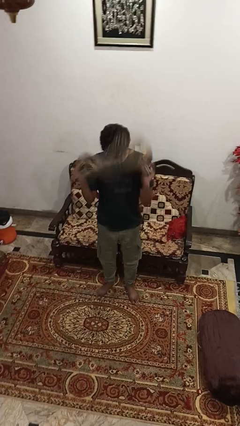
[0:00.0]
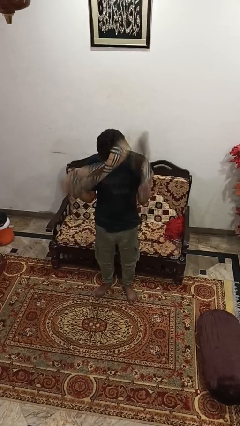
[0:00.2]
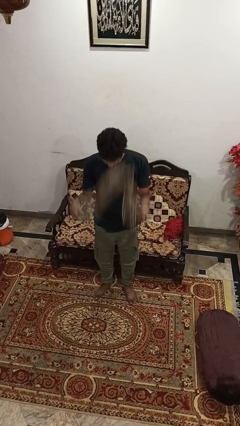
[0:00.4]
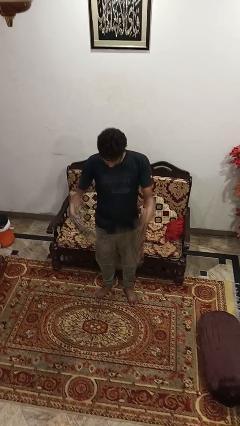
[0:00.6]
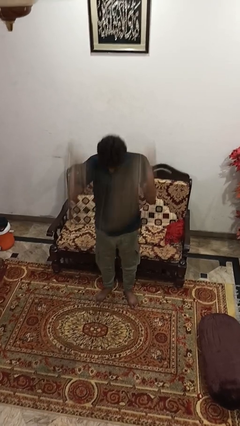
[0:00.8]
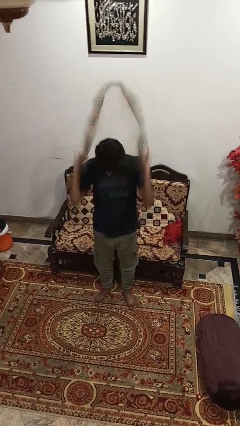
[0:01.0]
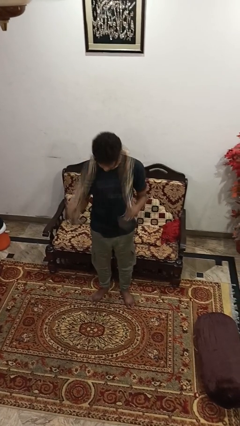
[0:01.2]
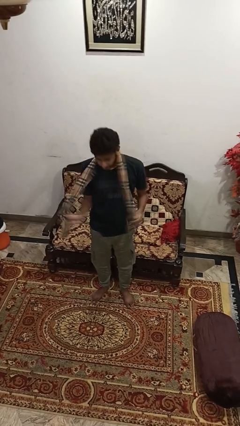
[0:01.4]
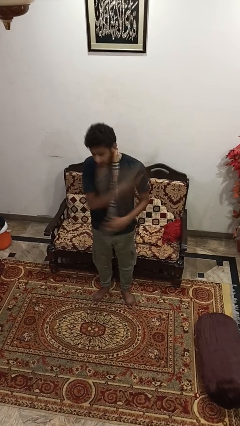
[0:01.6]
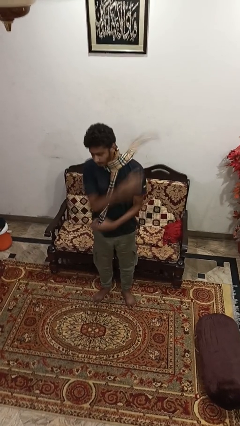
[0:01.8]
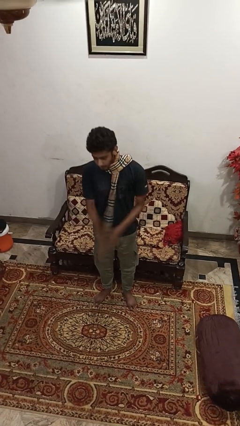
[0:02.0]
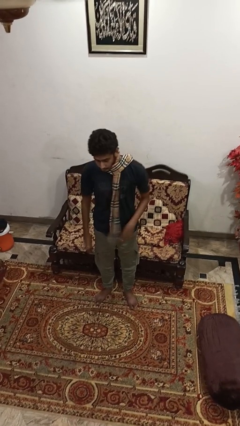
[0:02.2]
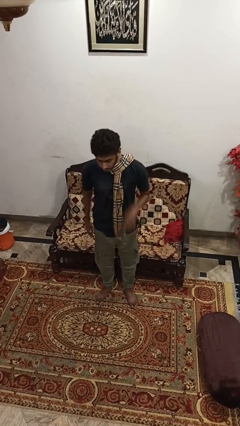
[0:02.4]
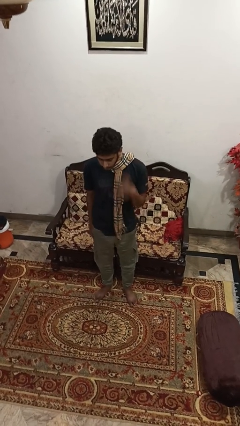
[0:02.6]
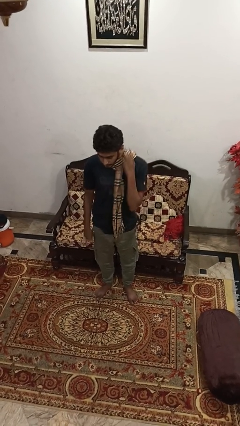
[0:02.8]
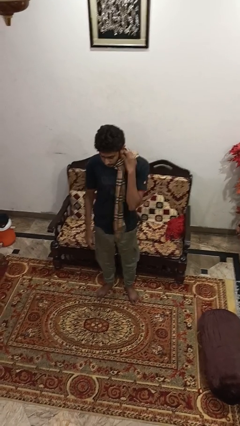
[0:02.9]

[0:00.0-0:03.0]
person puts on scarf

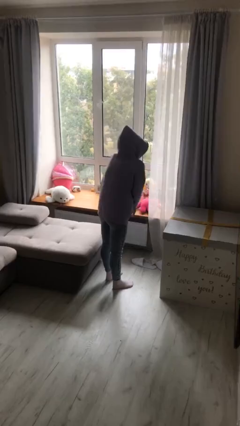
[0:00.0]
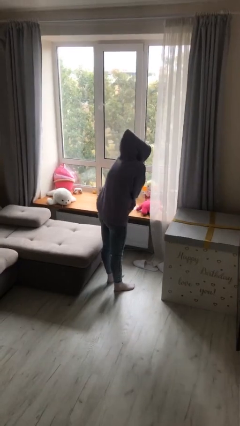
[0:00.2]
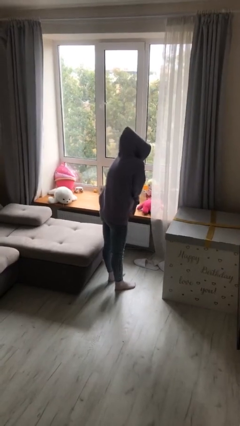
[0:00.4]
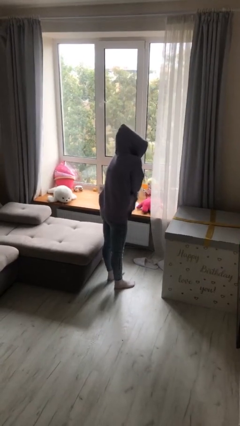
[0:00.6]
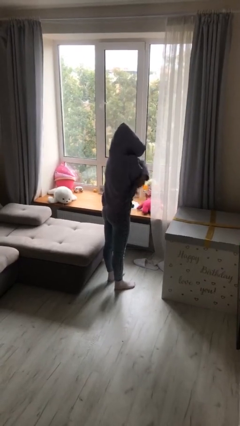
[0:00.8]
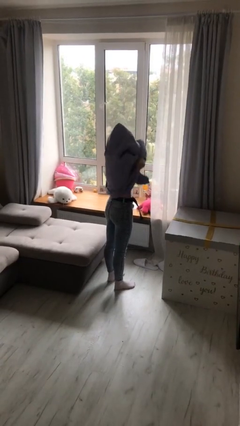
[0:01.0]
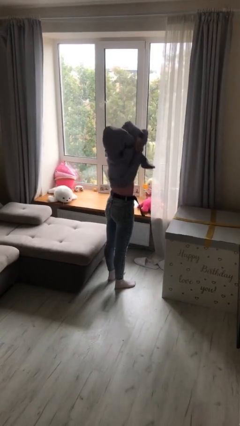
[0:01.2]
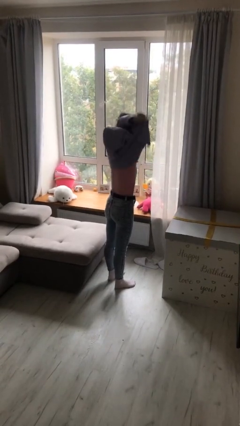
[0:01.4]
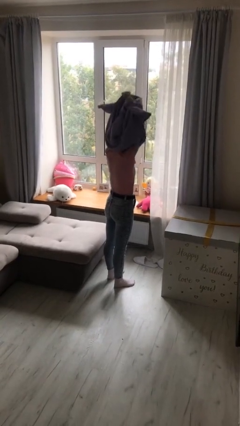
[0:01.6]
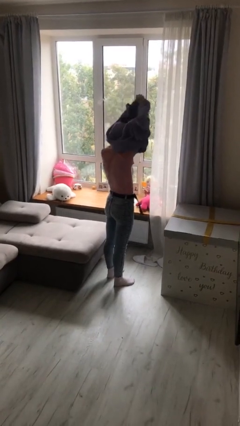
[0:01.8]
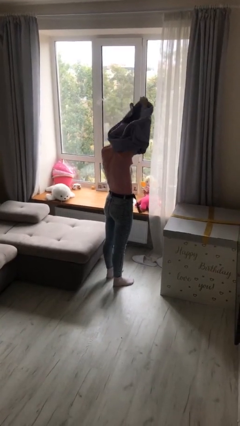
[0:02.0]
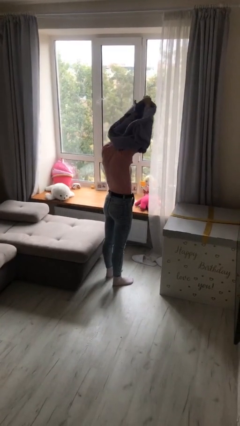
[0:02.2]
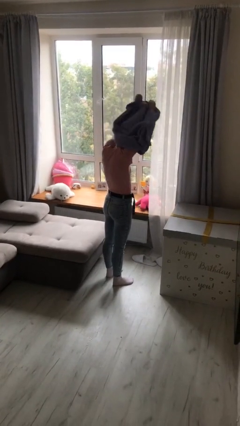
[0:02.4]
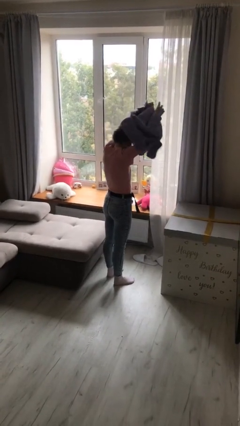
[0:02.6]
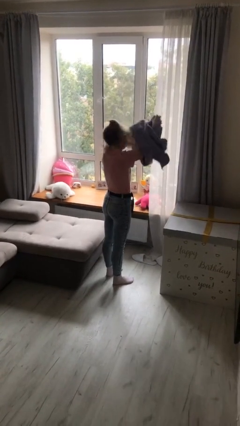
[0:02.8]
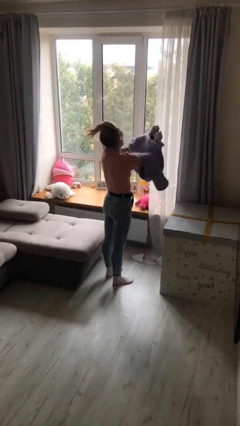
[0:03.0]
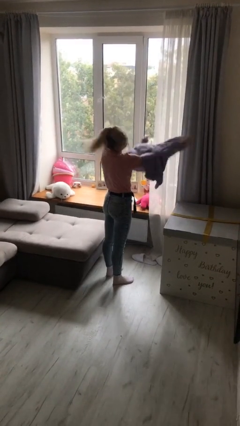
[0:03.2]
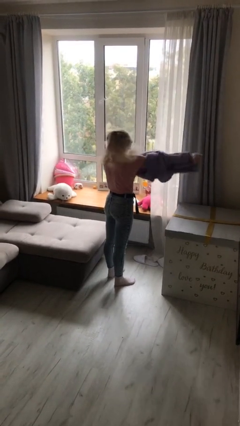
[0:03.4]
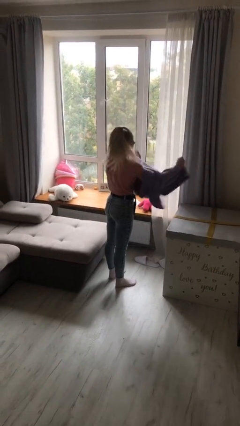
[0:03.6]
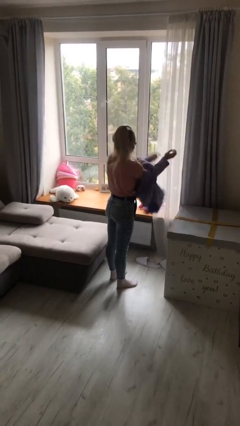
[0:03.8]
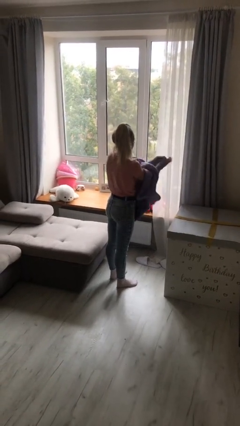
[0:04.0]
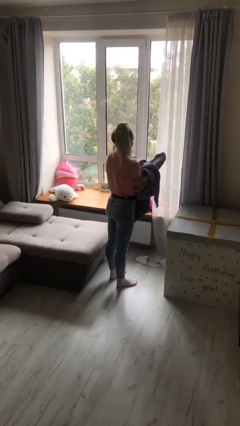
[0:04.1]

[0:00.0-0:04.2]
person takes off hoodie

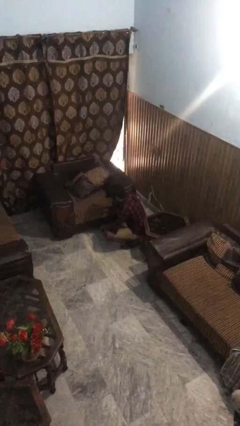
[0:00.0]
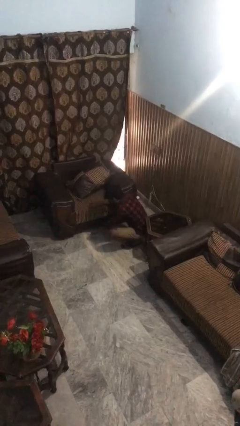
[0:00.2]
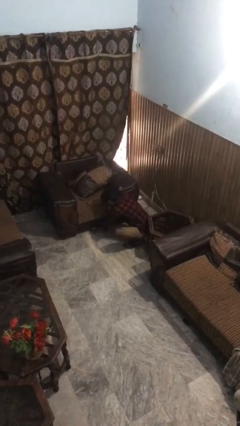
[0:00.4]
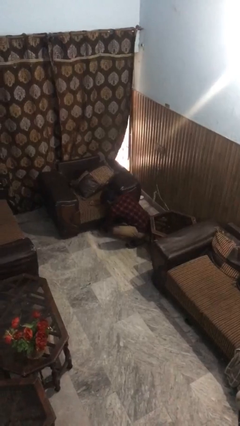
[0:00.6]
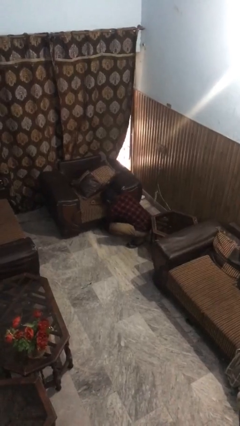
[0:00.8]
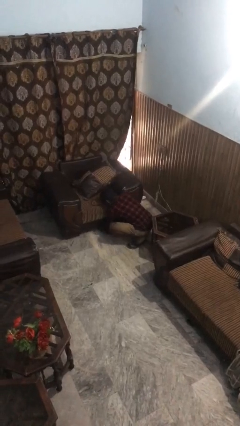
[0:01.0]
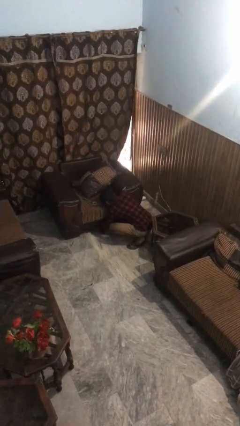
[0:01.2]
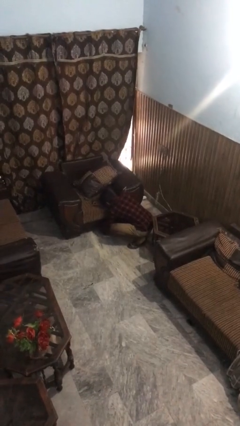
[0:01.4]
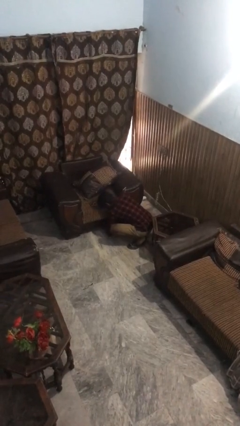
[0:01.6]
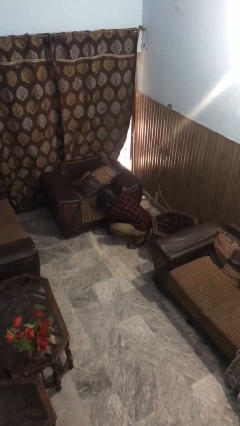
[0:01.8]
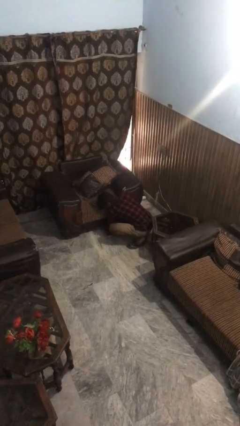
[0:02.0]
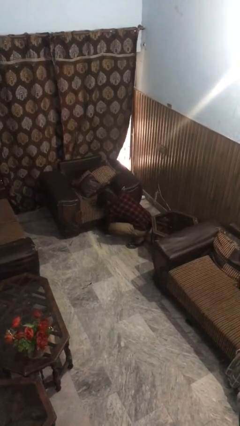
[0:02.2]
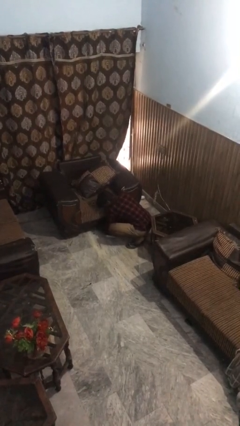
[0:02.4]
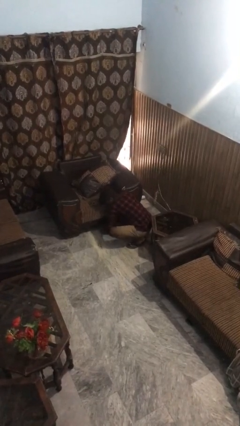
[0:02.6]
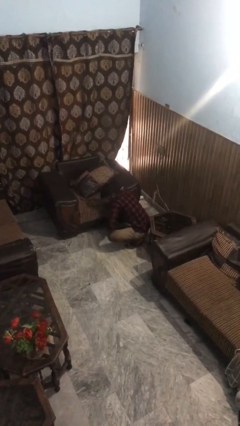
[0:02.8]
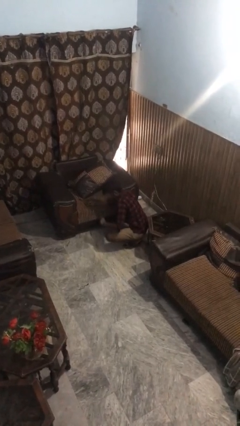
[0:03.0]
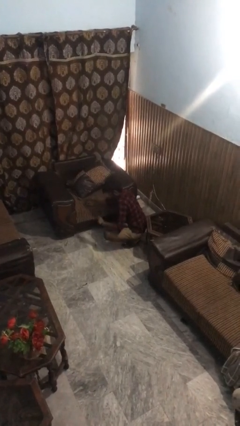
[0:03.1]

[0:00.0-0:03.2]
person searches under couch

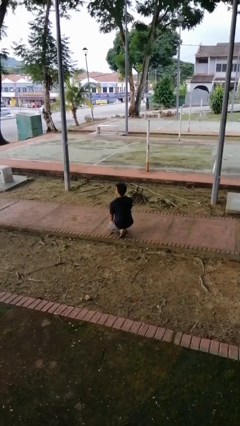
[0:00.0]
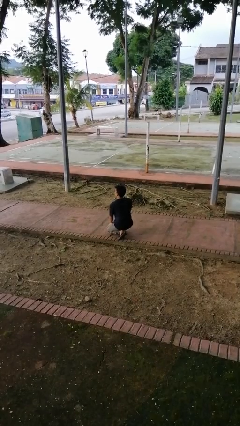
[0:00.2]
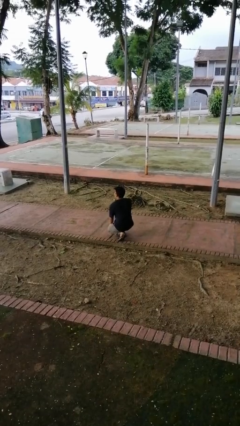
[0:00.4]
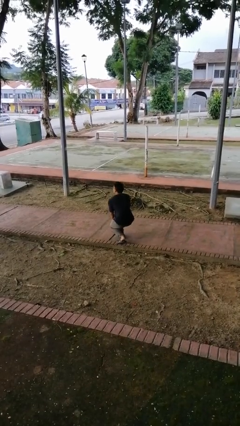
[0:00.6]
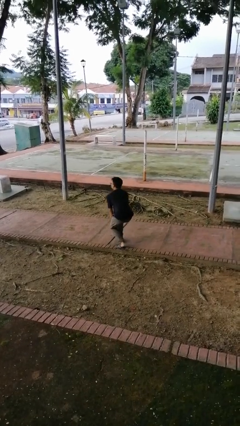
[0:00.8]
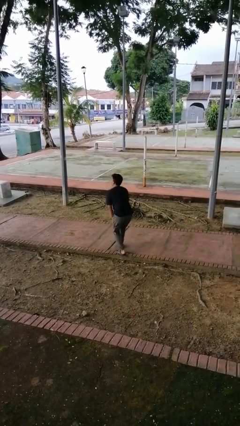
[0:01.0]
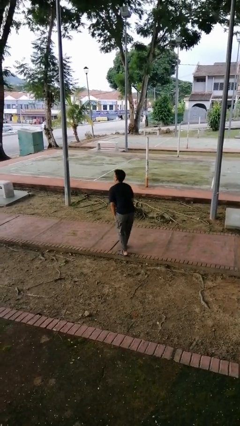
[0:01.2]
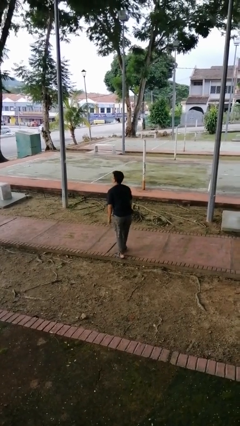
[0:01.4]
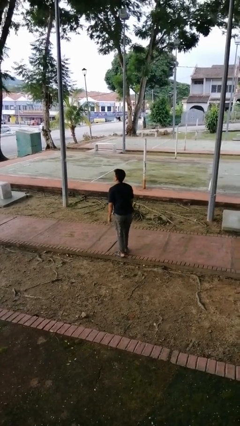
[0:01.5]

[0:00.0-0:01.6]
person stands up from floor

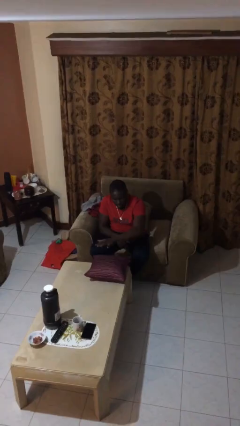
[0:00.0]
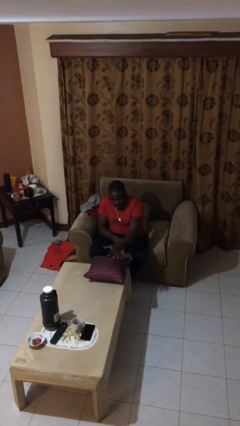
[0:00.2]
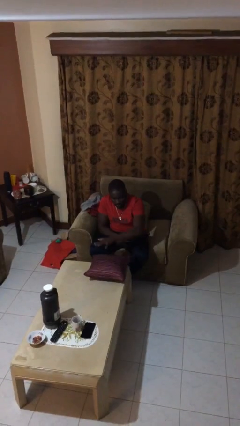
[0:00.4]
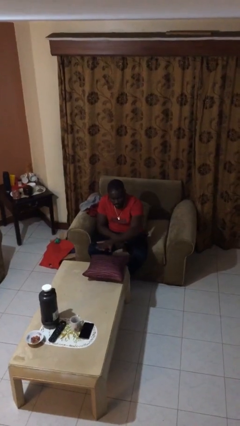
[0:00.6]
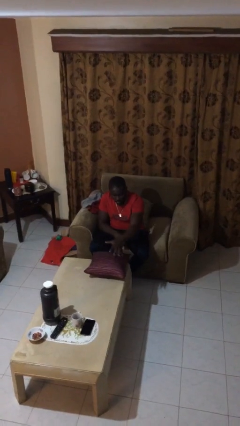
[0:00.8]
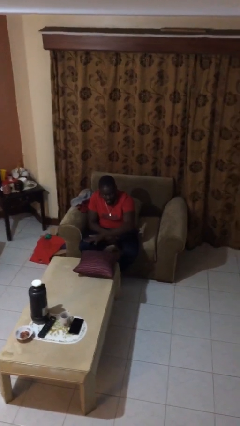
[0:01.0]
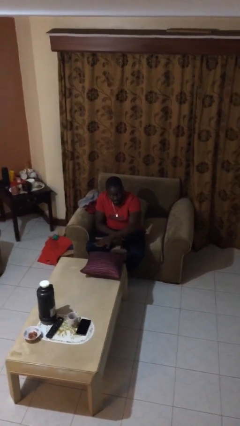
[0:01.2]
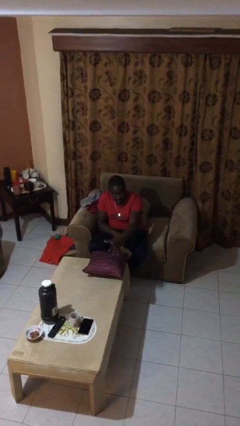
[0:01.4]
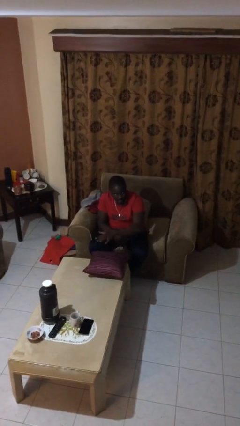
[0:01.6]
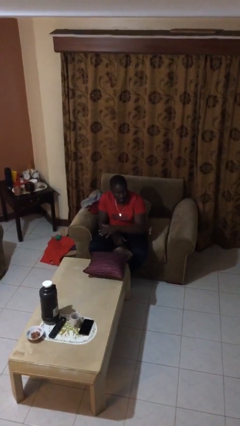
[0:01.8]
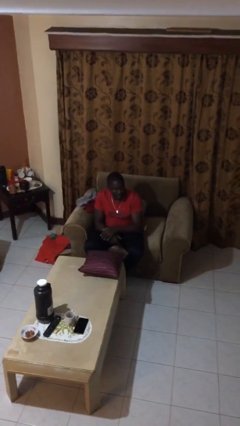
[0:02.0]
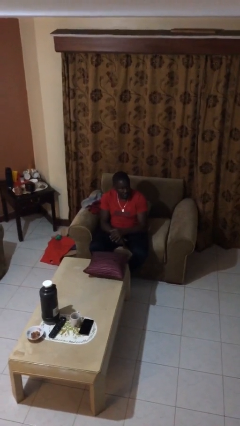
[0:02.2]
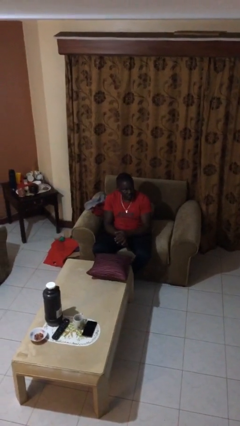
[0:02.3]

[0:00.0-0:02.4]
person waves hand over object

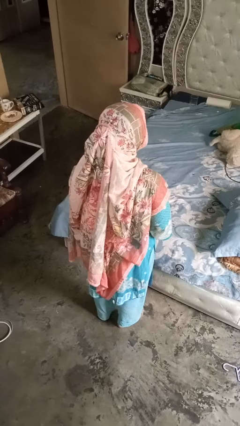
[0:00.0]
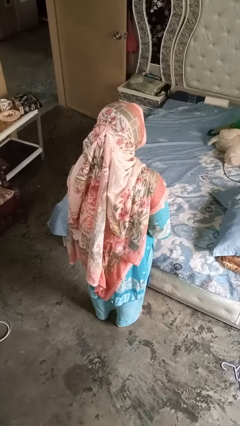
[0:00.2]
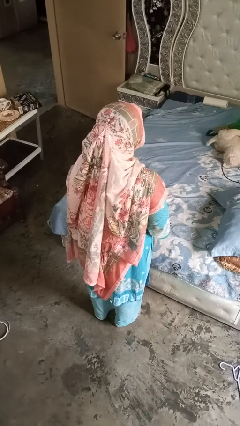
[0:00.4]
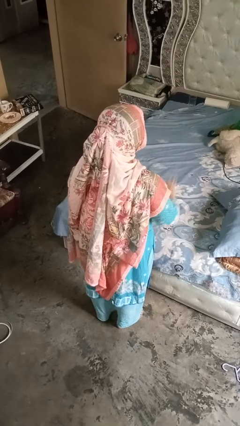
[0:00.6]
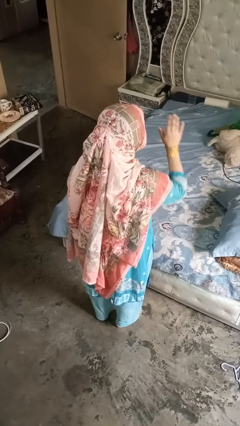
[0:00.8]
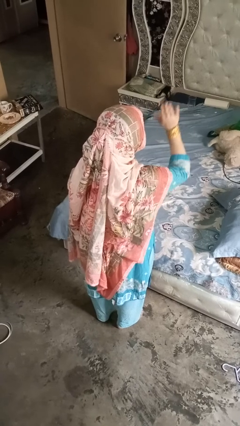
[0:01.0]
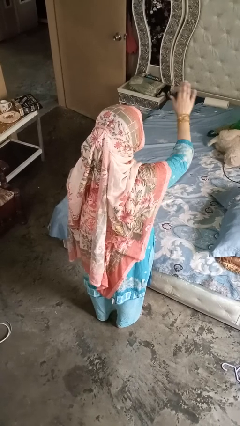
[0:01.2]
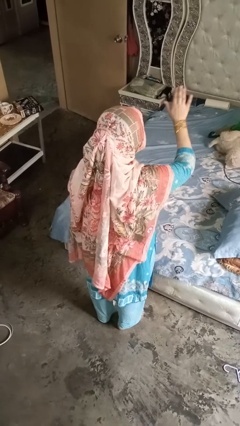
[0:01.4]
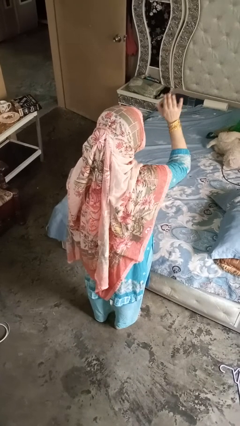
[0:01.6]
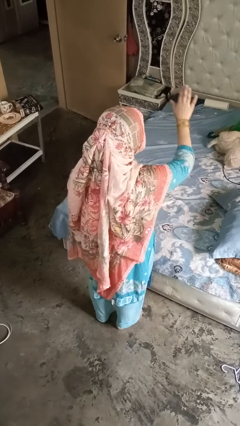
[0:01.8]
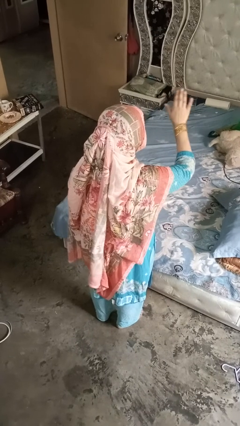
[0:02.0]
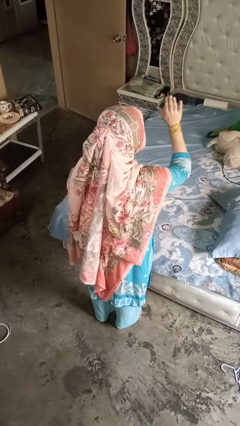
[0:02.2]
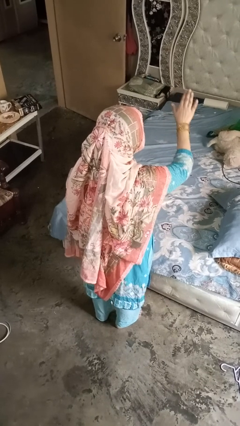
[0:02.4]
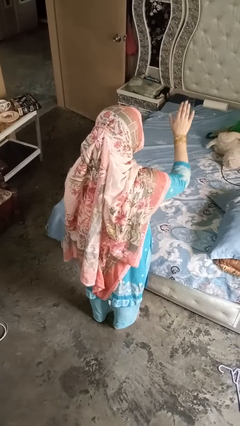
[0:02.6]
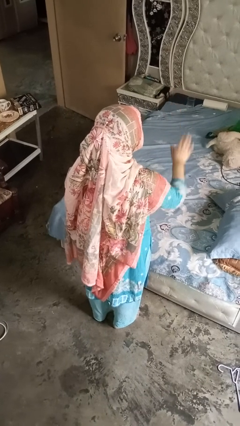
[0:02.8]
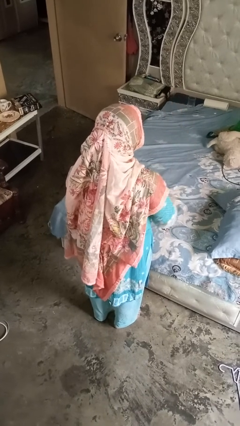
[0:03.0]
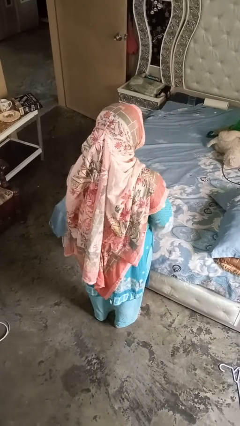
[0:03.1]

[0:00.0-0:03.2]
person gestures stop
